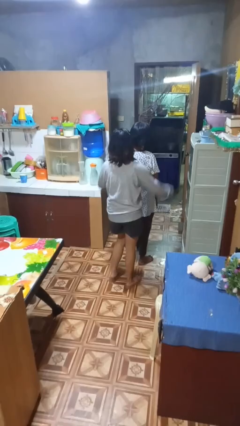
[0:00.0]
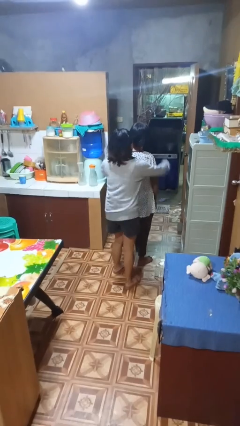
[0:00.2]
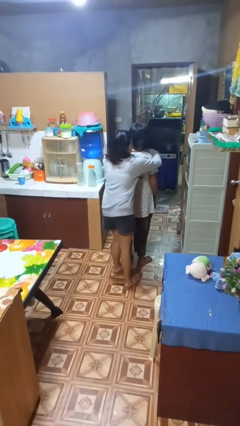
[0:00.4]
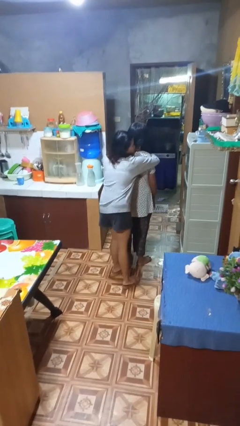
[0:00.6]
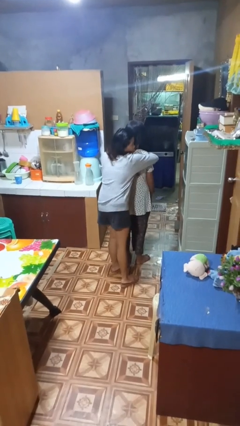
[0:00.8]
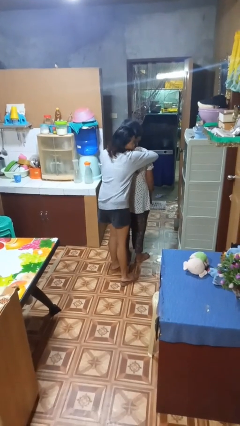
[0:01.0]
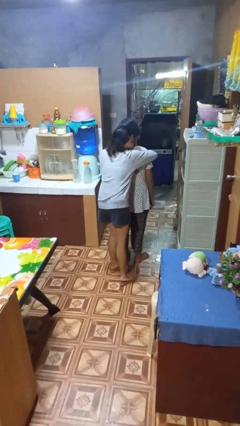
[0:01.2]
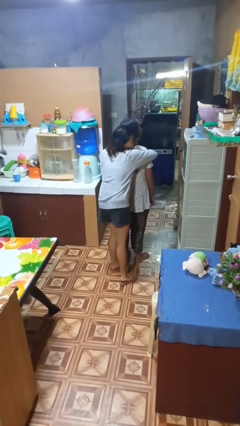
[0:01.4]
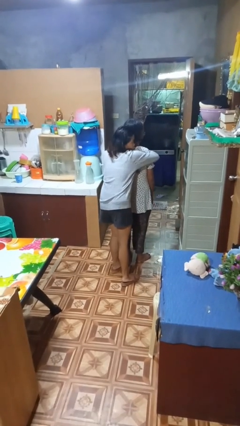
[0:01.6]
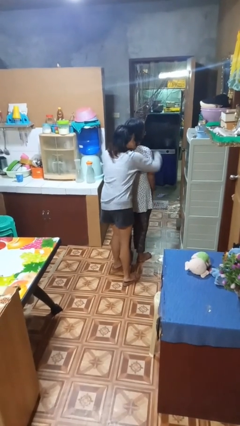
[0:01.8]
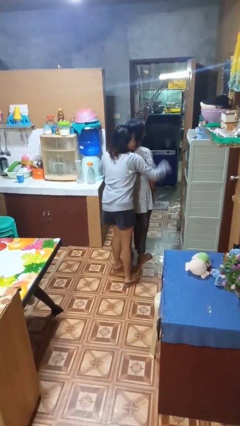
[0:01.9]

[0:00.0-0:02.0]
person hugs person from behind

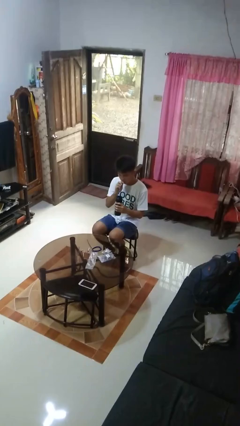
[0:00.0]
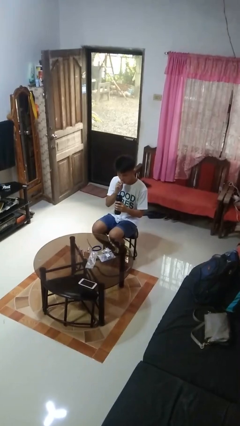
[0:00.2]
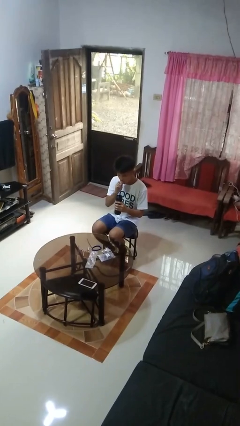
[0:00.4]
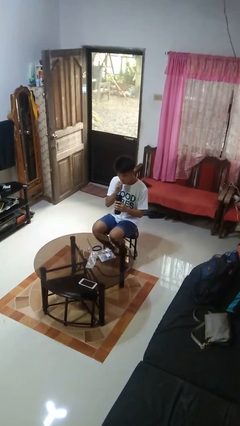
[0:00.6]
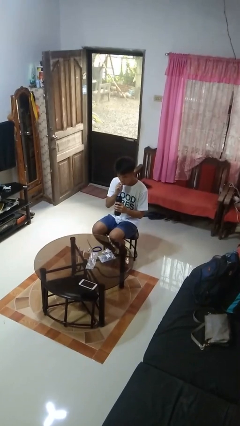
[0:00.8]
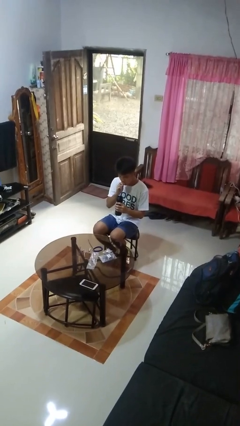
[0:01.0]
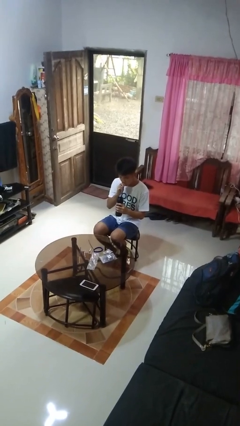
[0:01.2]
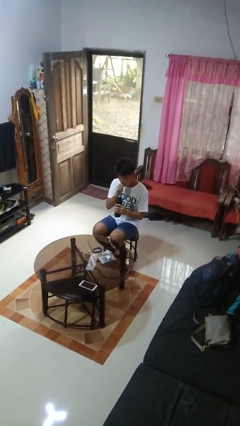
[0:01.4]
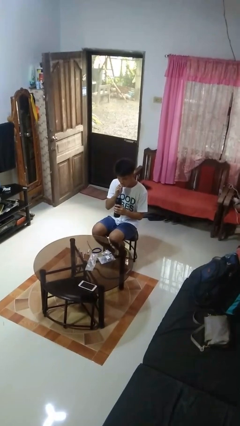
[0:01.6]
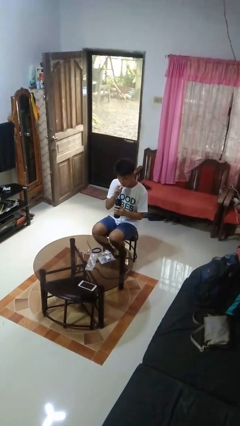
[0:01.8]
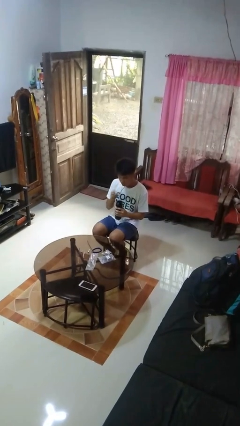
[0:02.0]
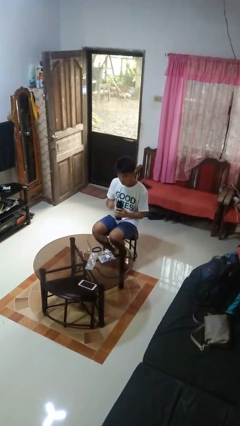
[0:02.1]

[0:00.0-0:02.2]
person drinks from straw

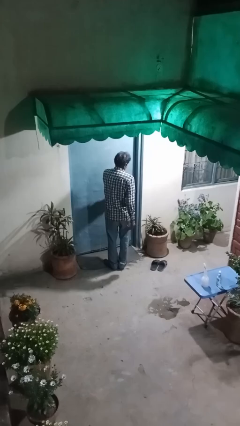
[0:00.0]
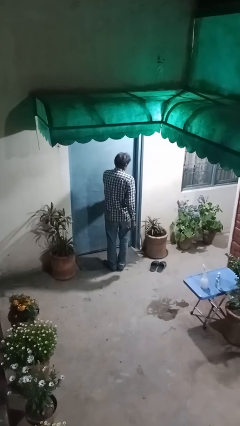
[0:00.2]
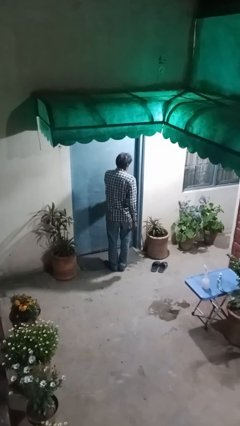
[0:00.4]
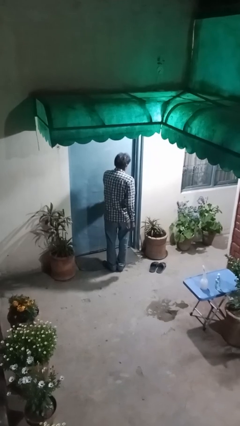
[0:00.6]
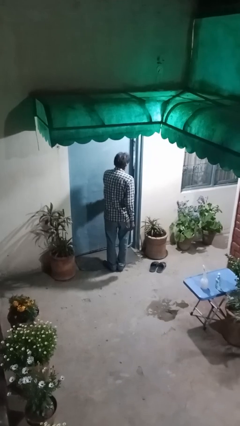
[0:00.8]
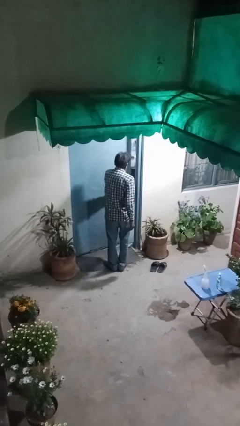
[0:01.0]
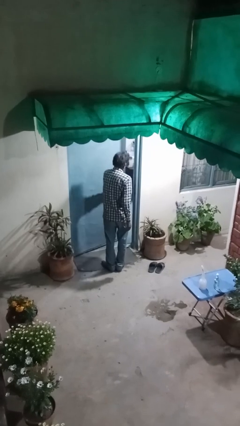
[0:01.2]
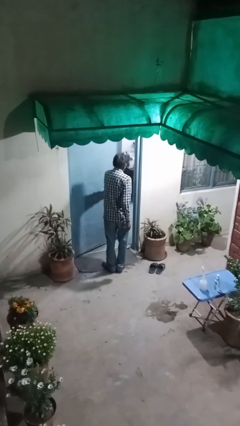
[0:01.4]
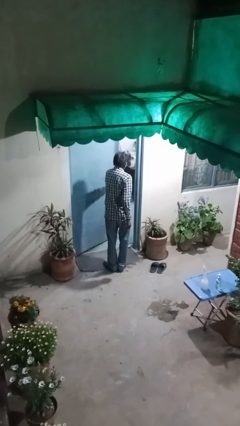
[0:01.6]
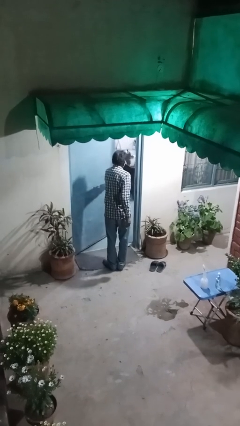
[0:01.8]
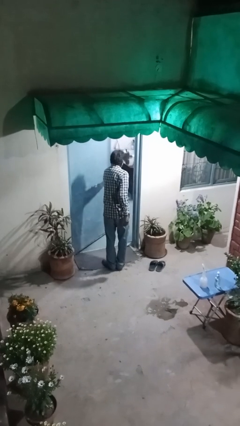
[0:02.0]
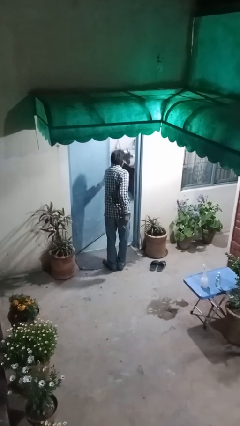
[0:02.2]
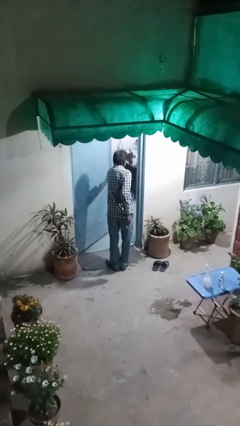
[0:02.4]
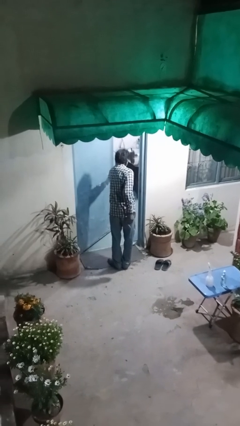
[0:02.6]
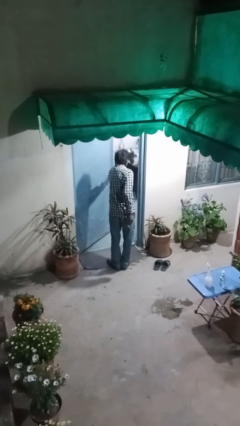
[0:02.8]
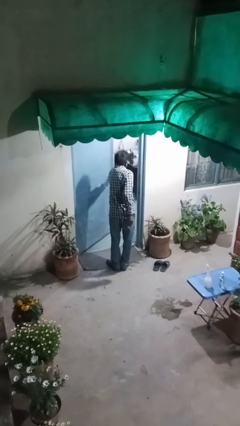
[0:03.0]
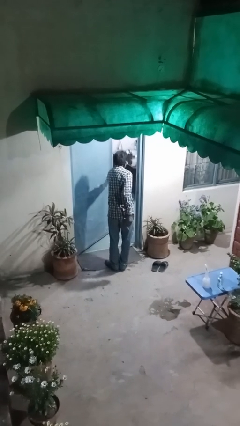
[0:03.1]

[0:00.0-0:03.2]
person opens facility door

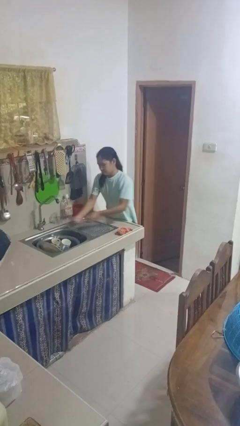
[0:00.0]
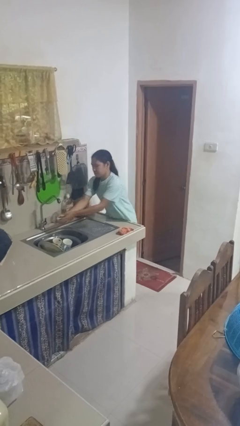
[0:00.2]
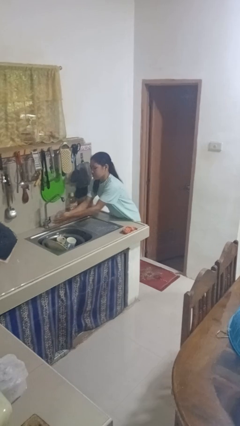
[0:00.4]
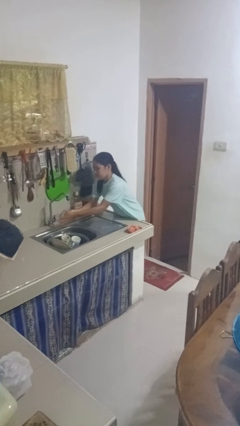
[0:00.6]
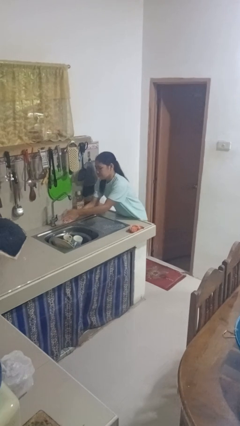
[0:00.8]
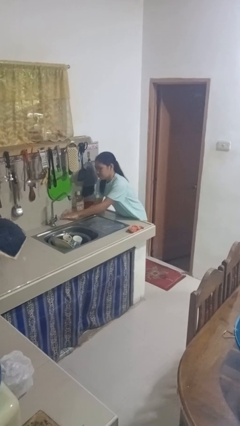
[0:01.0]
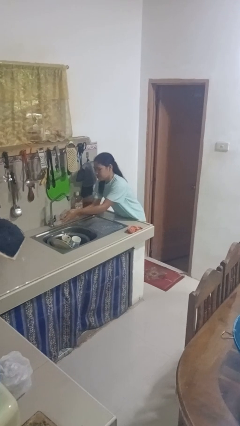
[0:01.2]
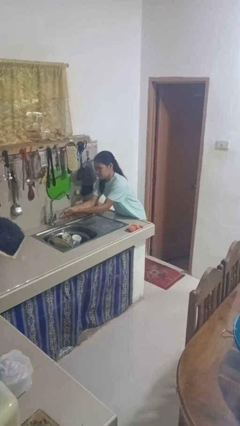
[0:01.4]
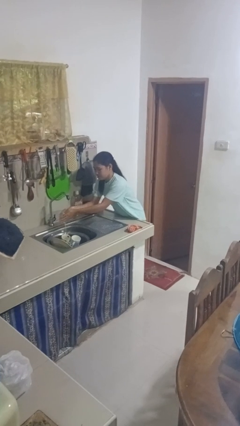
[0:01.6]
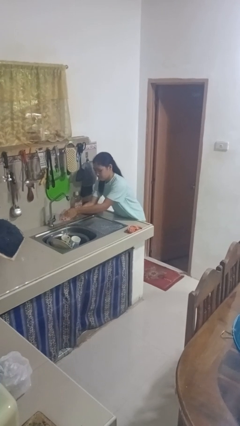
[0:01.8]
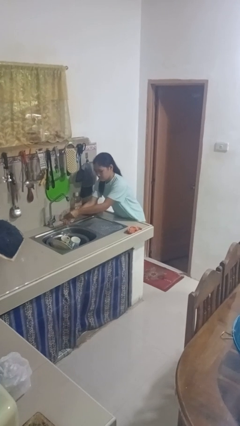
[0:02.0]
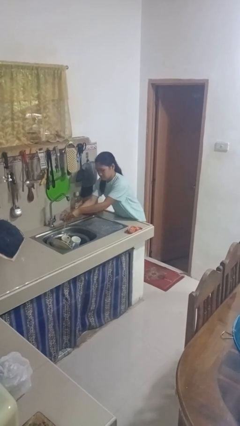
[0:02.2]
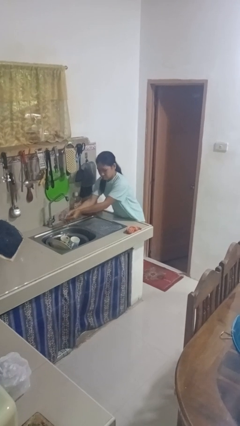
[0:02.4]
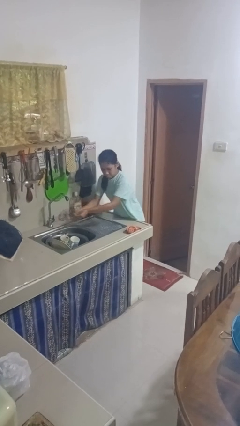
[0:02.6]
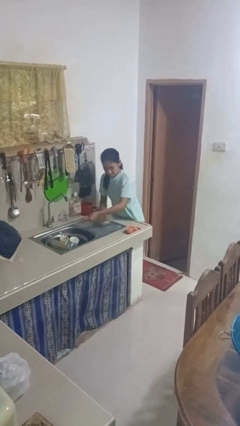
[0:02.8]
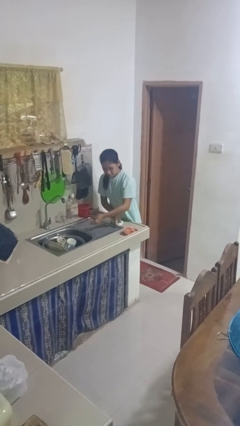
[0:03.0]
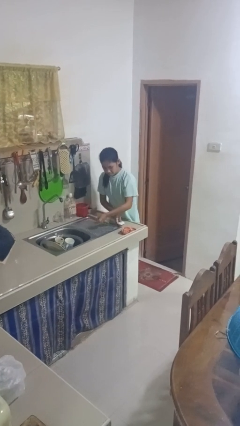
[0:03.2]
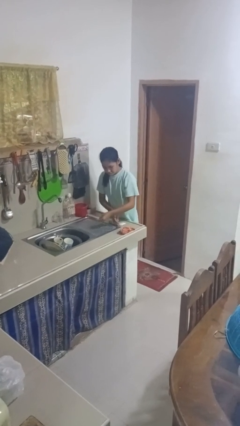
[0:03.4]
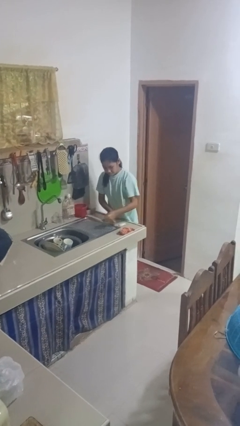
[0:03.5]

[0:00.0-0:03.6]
person washes hands

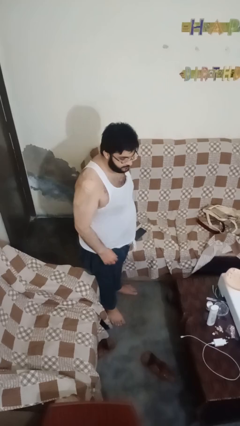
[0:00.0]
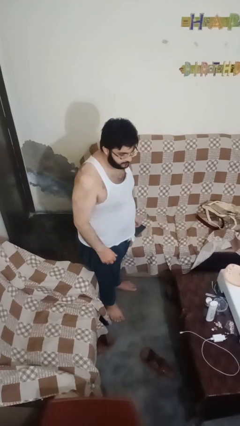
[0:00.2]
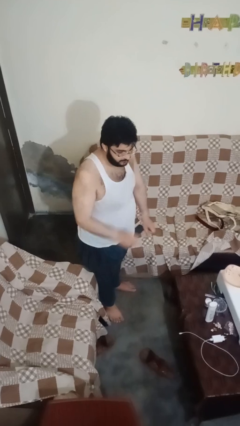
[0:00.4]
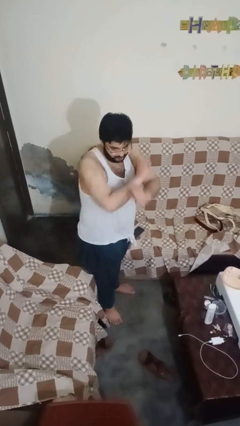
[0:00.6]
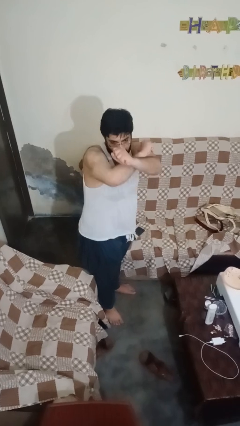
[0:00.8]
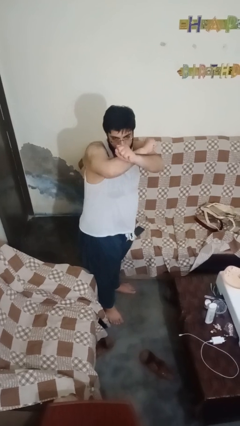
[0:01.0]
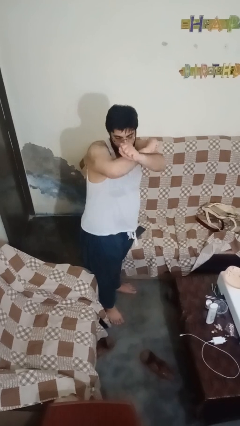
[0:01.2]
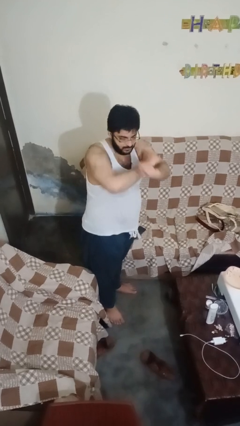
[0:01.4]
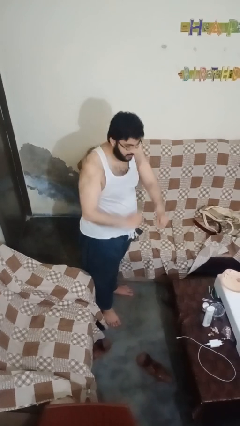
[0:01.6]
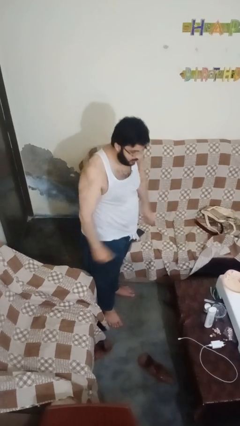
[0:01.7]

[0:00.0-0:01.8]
person karate chop

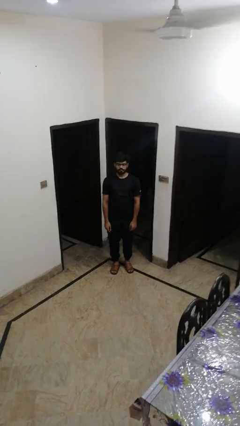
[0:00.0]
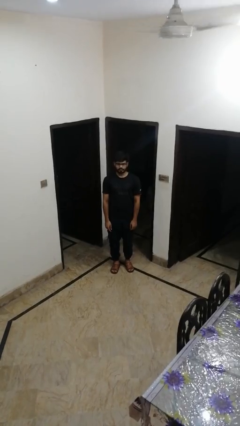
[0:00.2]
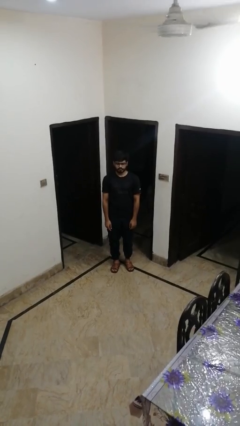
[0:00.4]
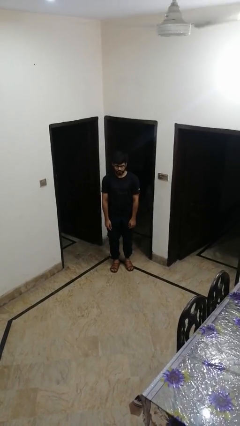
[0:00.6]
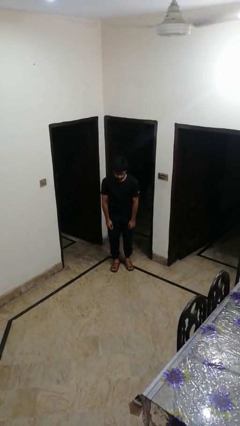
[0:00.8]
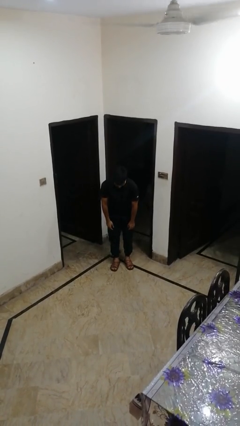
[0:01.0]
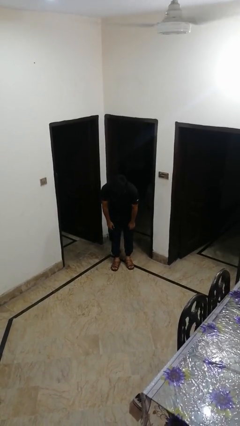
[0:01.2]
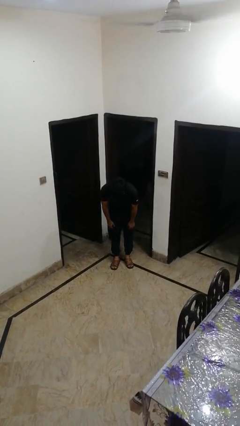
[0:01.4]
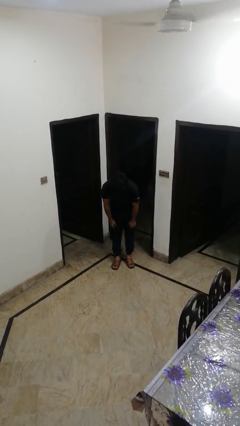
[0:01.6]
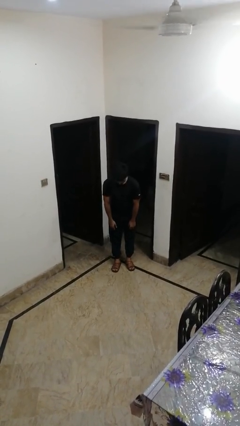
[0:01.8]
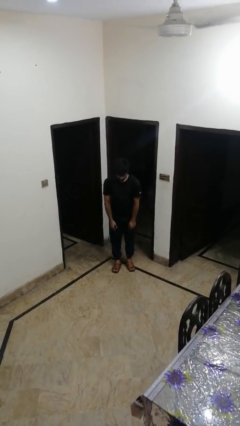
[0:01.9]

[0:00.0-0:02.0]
person bows

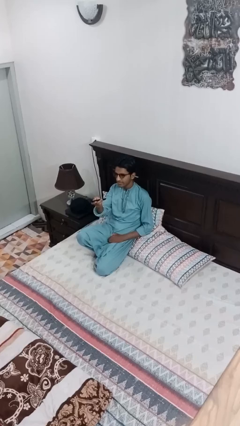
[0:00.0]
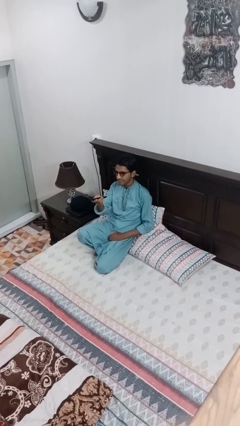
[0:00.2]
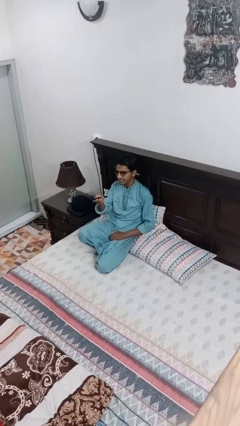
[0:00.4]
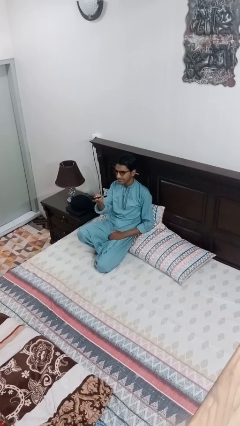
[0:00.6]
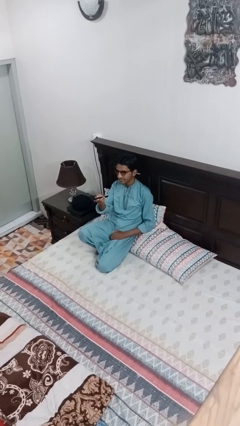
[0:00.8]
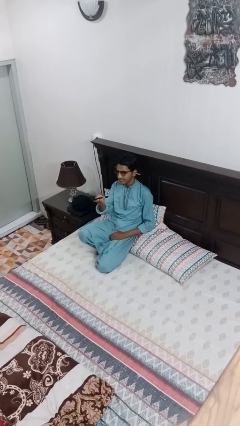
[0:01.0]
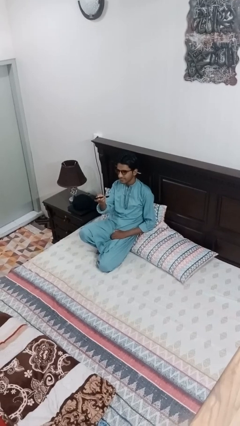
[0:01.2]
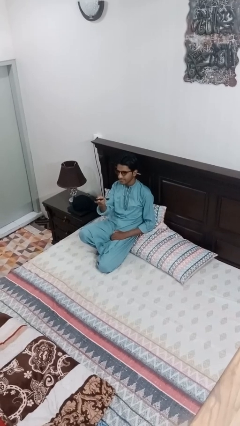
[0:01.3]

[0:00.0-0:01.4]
person uses television remote

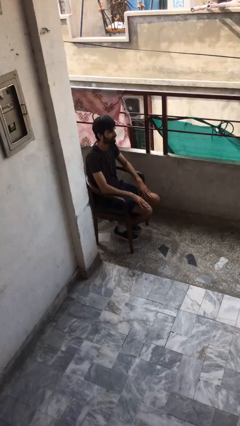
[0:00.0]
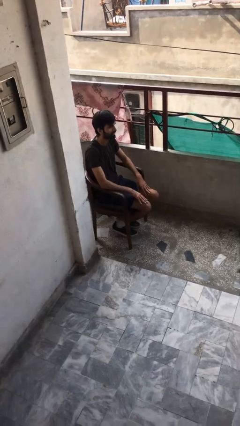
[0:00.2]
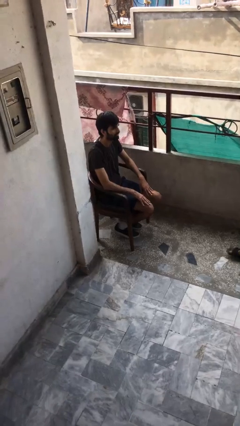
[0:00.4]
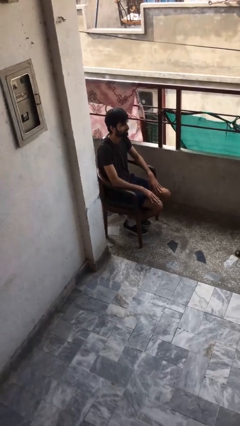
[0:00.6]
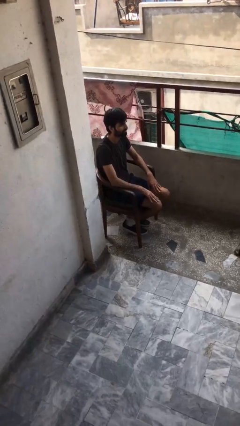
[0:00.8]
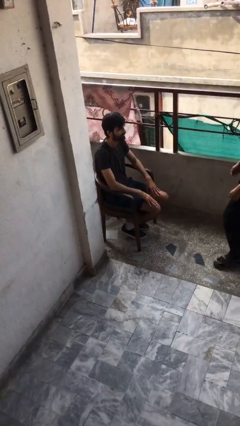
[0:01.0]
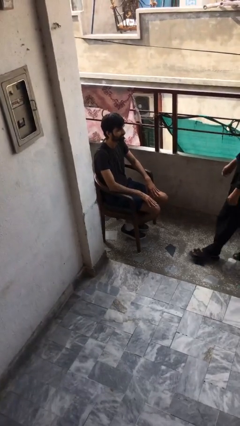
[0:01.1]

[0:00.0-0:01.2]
person embraces person
